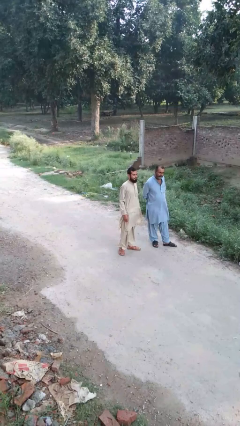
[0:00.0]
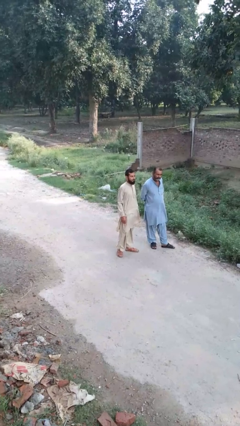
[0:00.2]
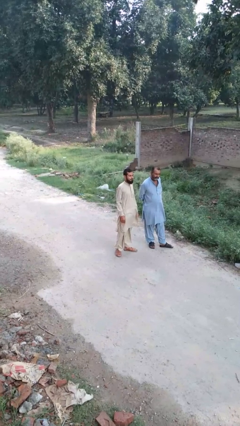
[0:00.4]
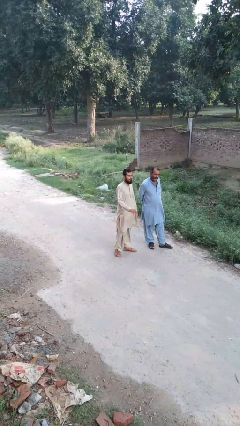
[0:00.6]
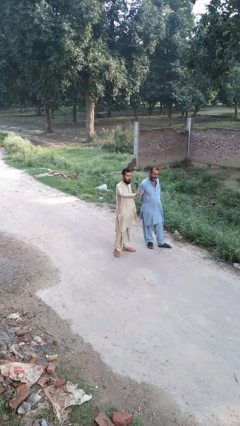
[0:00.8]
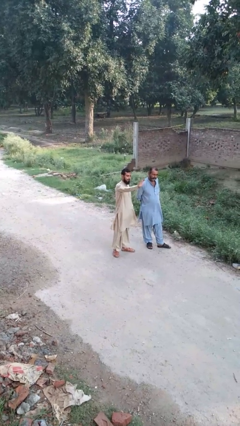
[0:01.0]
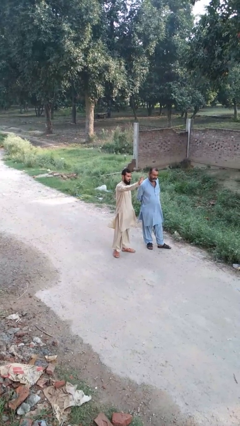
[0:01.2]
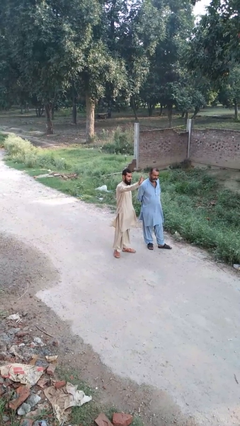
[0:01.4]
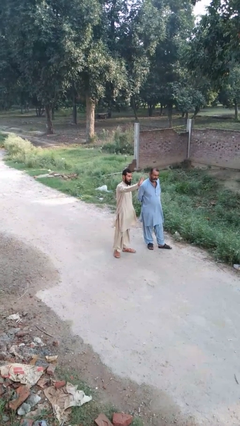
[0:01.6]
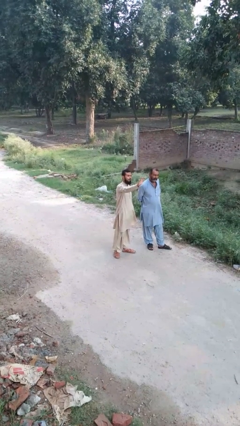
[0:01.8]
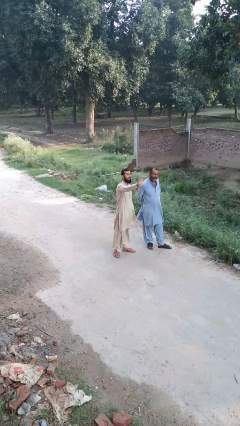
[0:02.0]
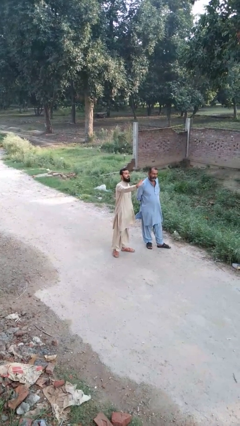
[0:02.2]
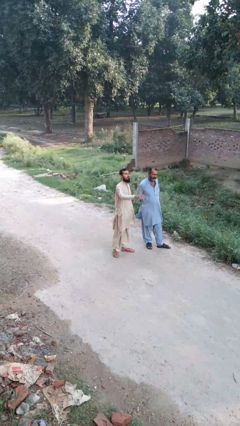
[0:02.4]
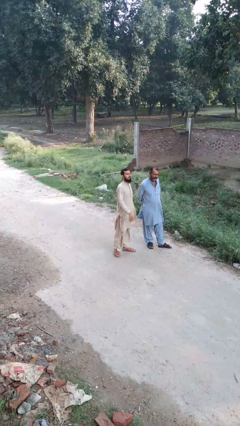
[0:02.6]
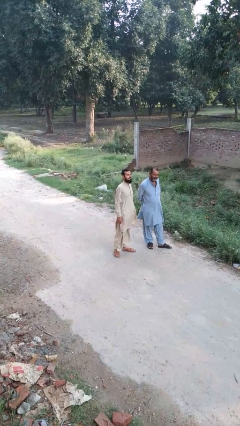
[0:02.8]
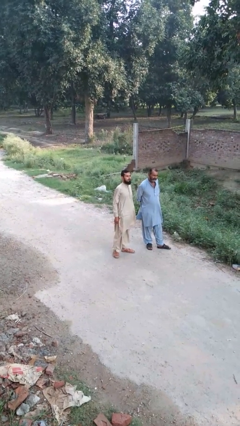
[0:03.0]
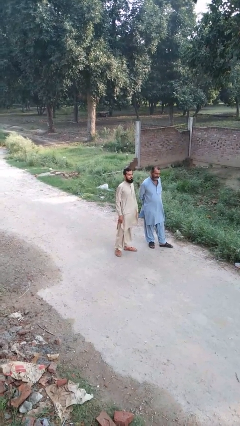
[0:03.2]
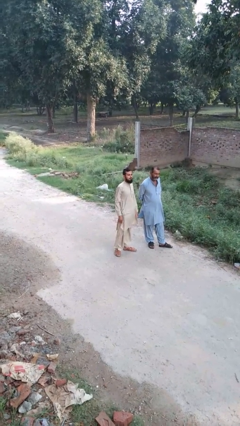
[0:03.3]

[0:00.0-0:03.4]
person waves at person

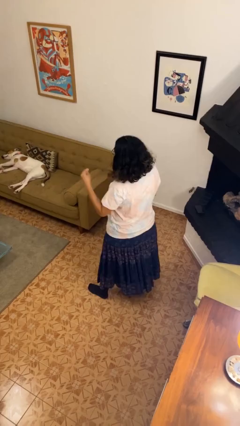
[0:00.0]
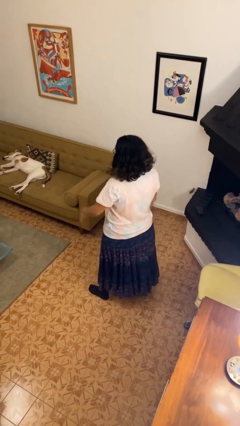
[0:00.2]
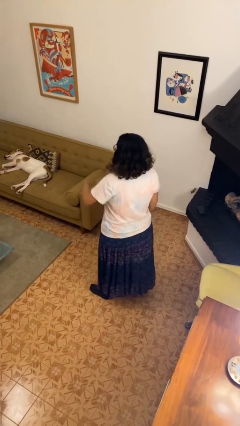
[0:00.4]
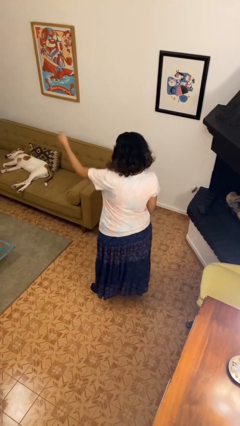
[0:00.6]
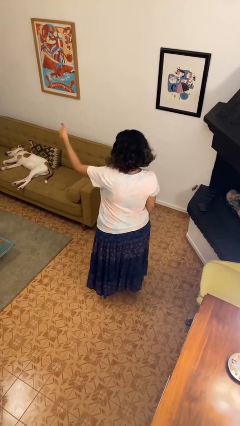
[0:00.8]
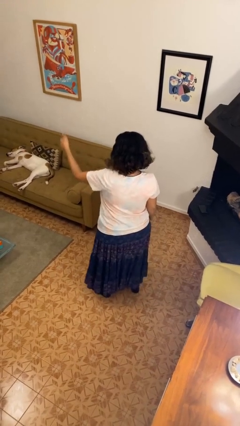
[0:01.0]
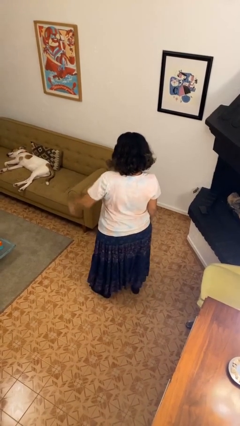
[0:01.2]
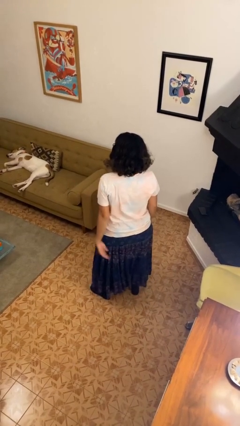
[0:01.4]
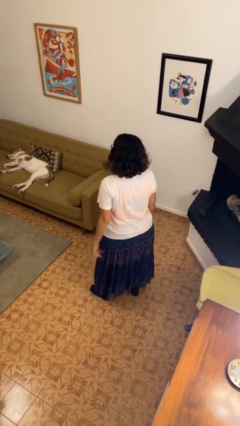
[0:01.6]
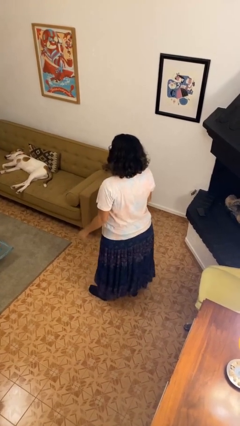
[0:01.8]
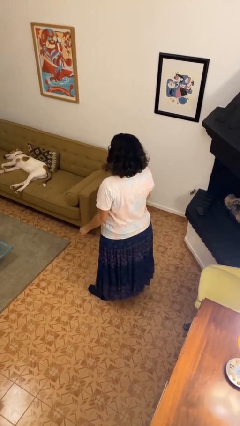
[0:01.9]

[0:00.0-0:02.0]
person gestures thumbs up

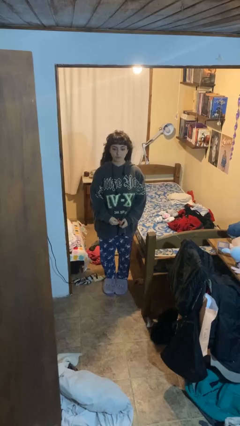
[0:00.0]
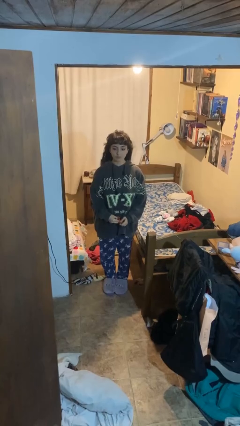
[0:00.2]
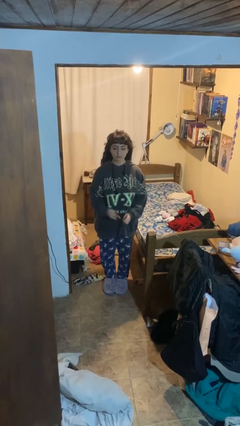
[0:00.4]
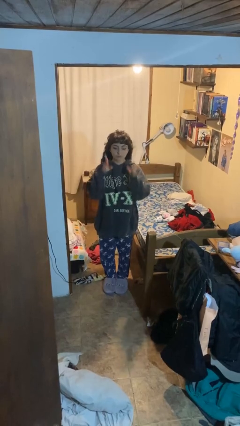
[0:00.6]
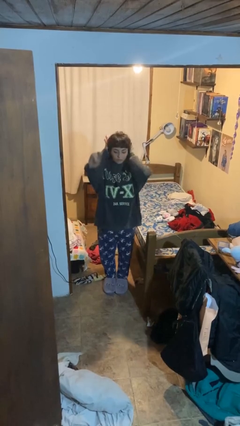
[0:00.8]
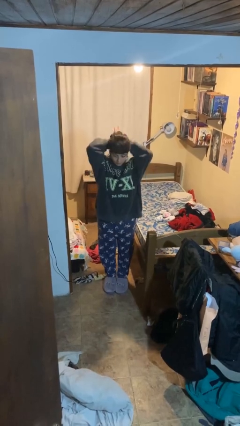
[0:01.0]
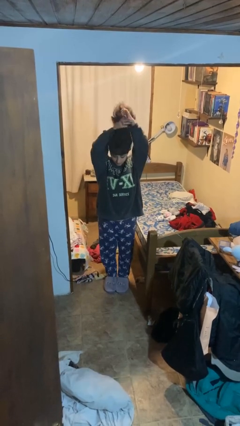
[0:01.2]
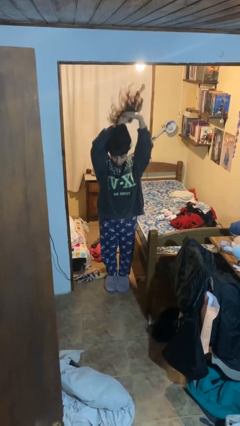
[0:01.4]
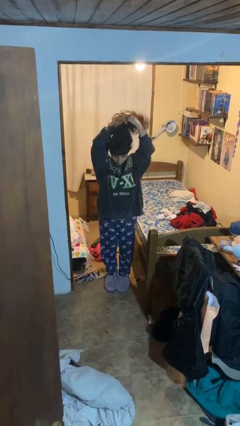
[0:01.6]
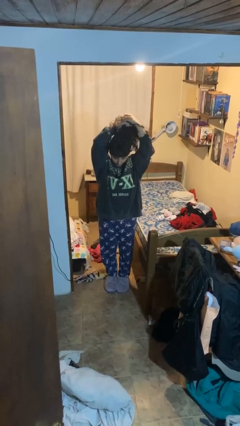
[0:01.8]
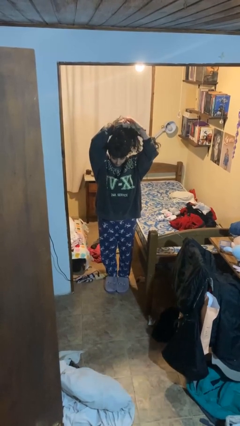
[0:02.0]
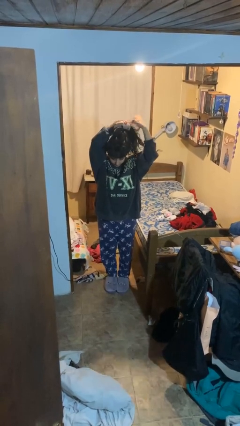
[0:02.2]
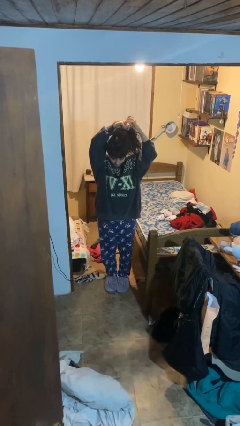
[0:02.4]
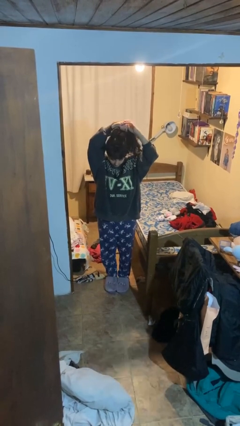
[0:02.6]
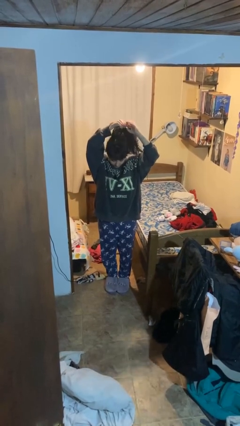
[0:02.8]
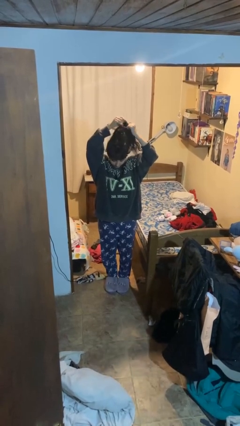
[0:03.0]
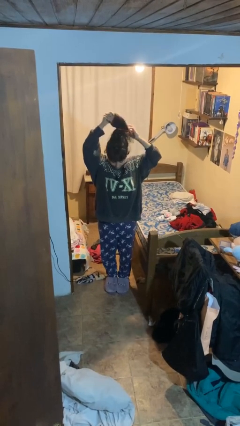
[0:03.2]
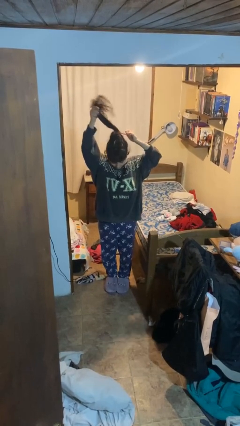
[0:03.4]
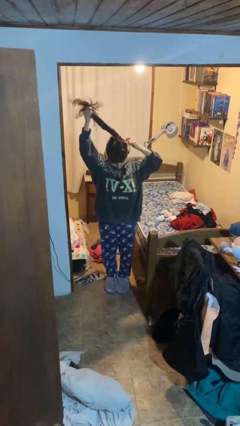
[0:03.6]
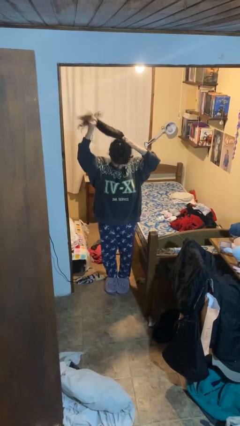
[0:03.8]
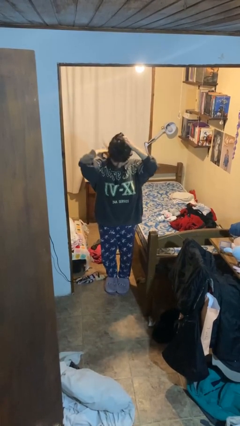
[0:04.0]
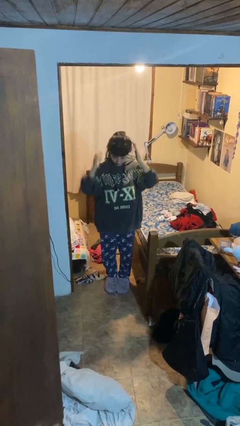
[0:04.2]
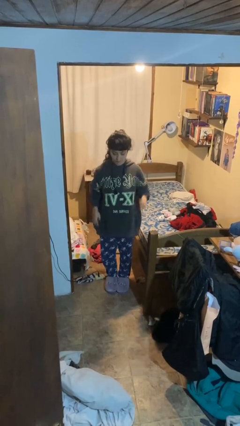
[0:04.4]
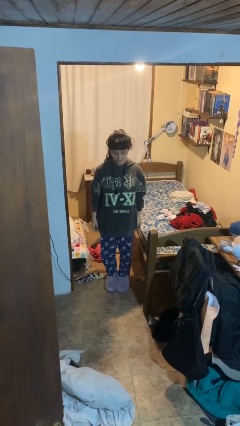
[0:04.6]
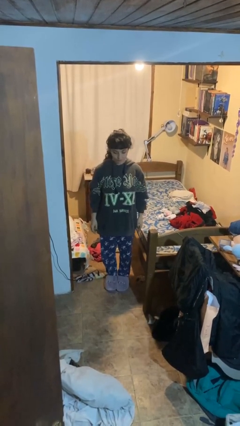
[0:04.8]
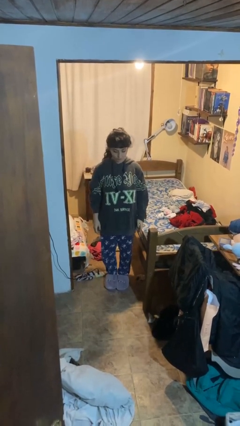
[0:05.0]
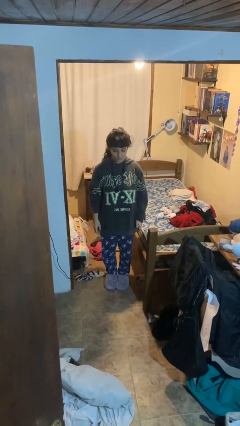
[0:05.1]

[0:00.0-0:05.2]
person puts hair in ponytail

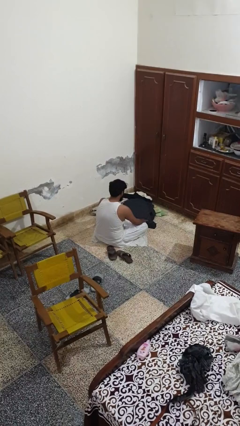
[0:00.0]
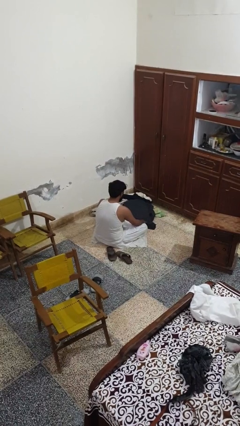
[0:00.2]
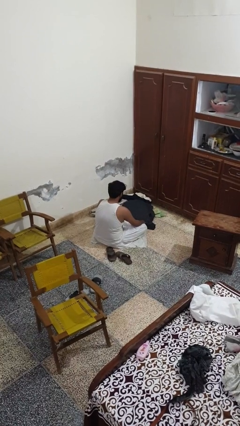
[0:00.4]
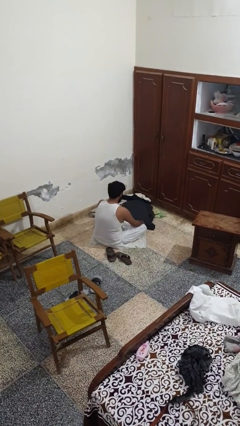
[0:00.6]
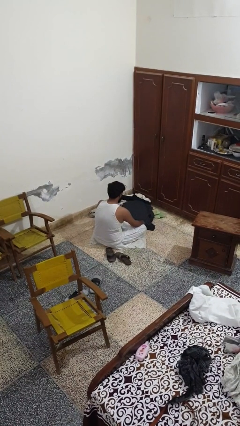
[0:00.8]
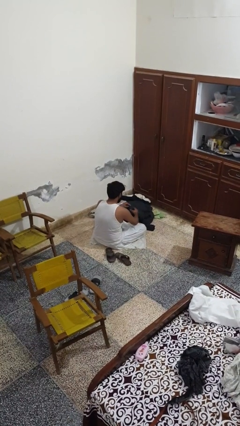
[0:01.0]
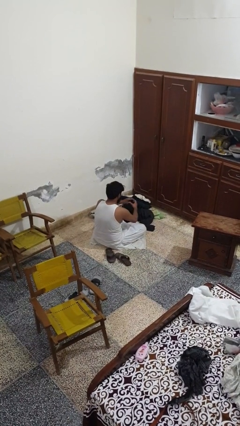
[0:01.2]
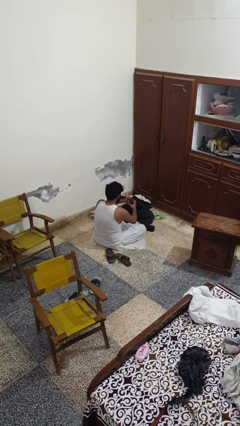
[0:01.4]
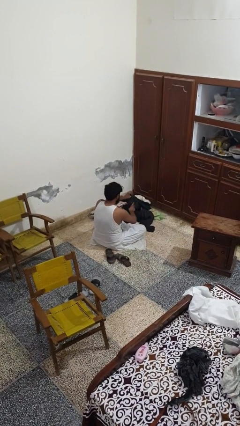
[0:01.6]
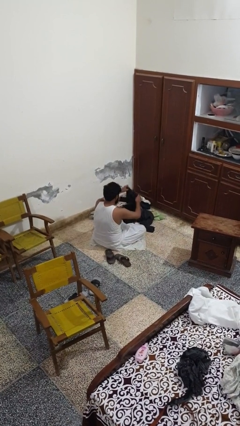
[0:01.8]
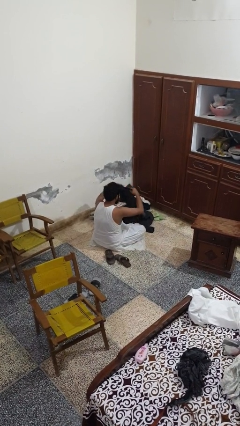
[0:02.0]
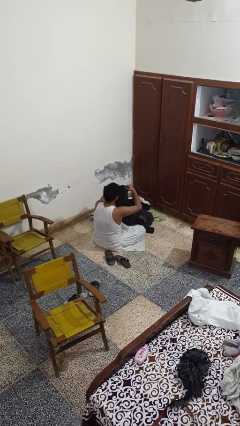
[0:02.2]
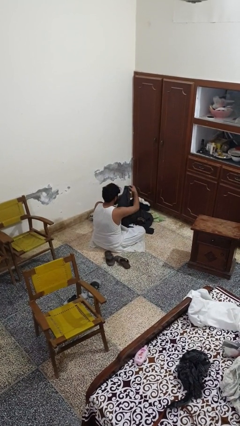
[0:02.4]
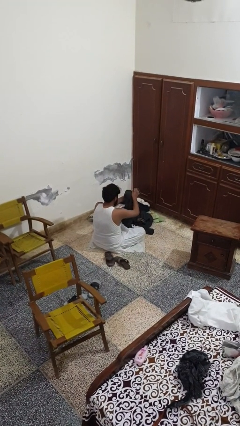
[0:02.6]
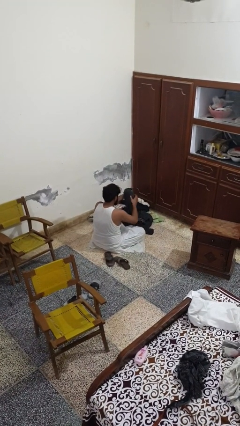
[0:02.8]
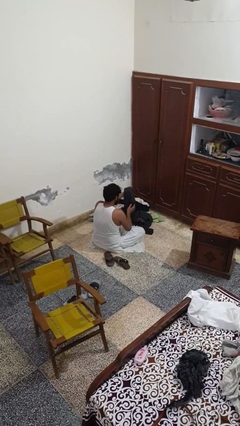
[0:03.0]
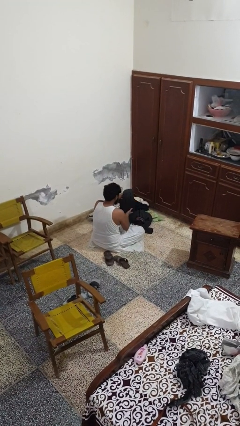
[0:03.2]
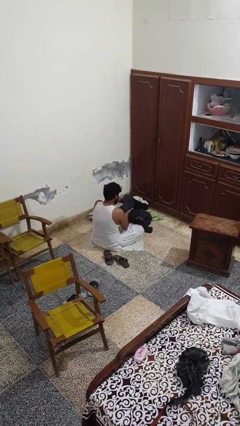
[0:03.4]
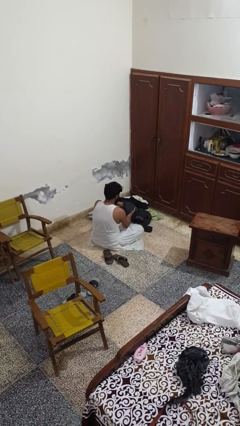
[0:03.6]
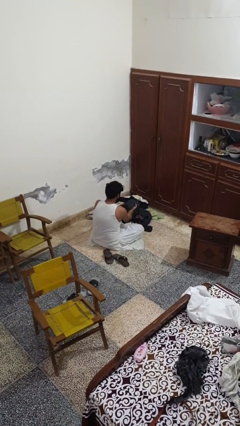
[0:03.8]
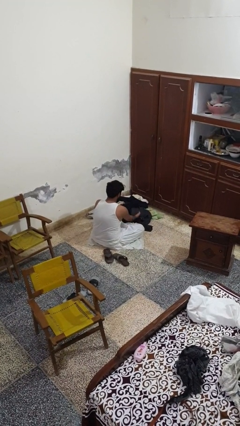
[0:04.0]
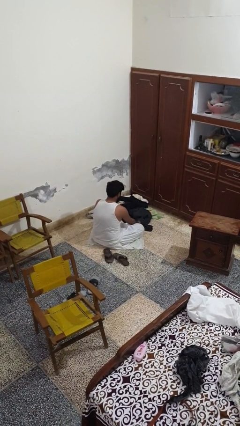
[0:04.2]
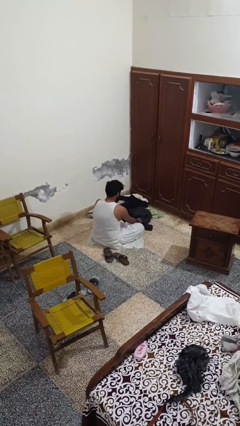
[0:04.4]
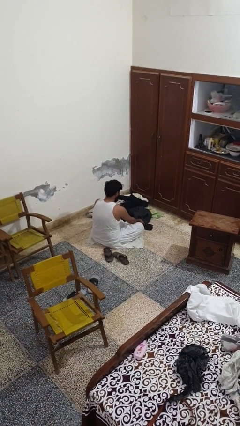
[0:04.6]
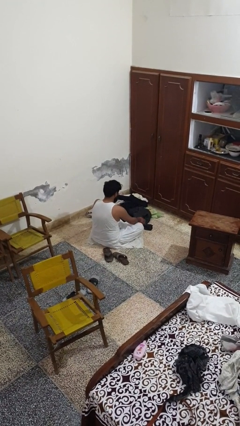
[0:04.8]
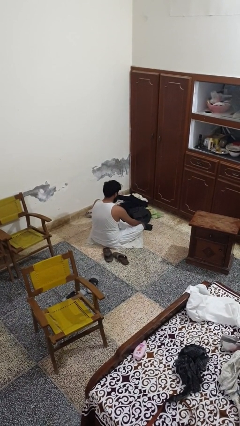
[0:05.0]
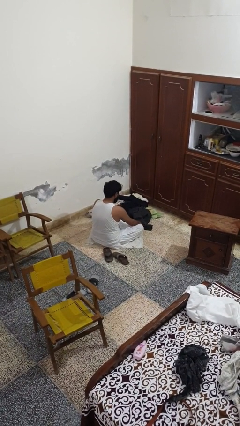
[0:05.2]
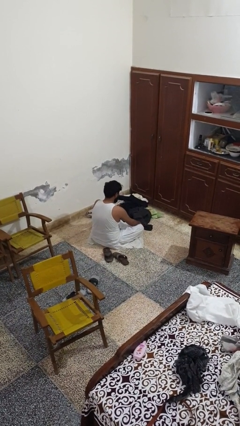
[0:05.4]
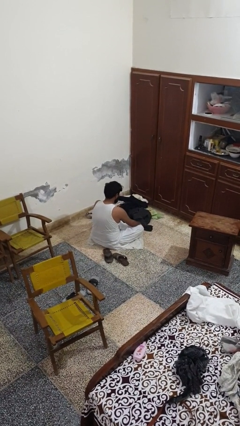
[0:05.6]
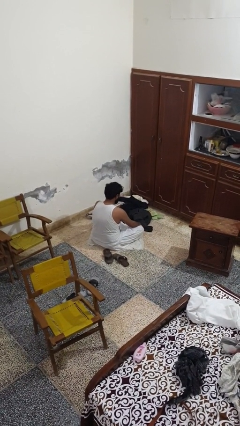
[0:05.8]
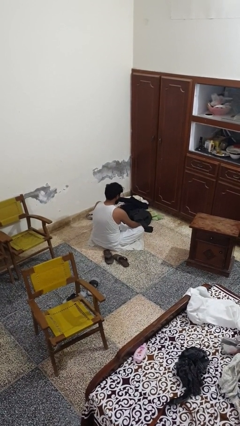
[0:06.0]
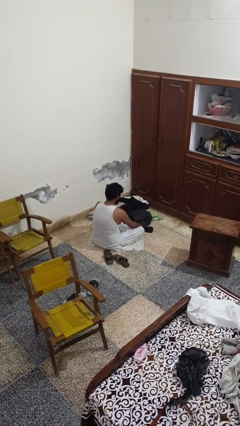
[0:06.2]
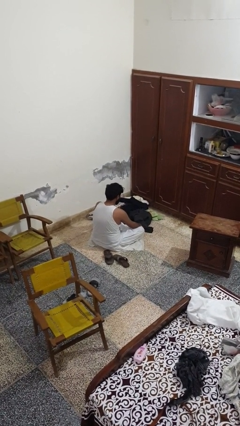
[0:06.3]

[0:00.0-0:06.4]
person folds shirt

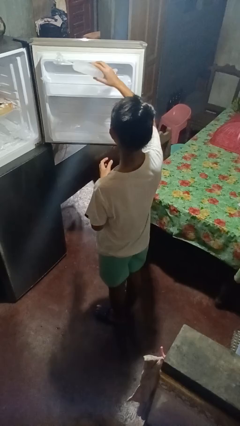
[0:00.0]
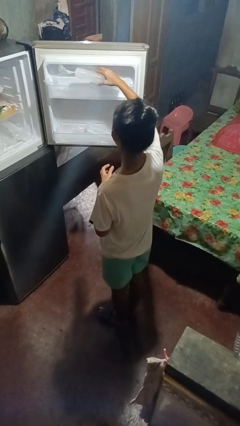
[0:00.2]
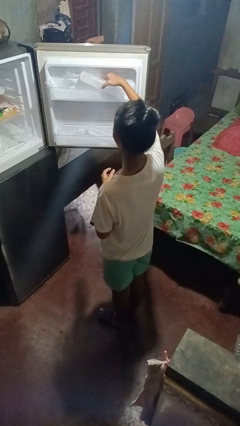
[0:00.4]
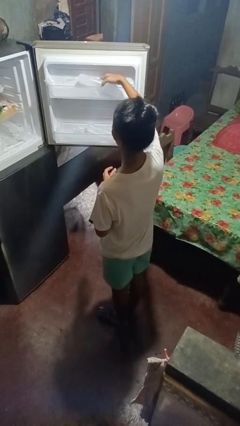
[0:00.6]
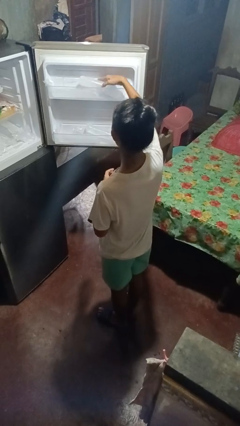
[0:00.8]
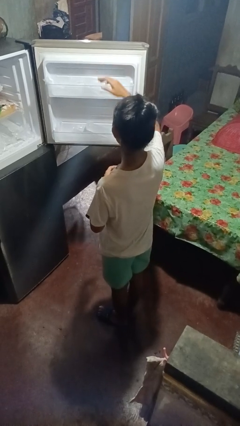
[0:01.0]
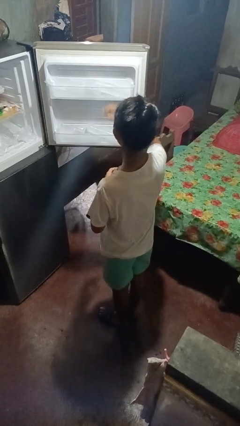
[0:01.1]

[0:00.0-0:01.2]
person puts object into refrigerator
